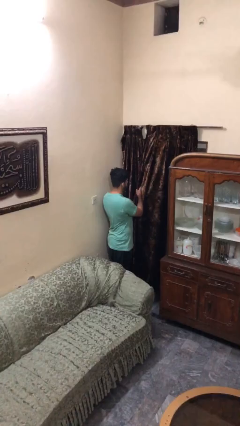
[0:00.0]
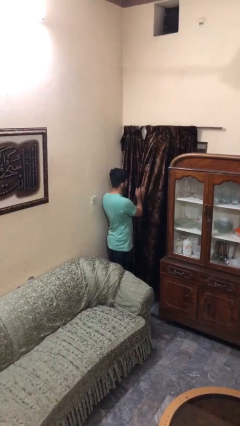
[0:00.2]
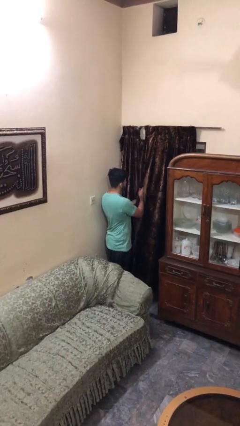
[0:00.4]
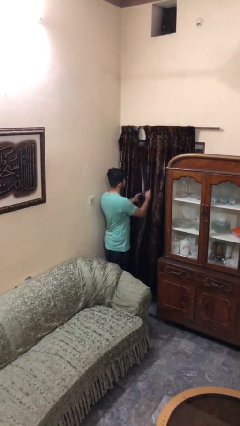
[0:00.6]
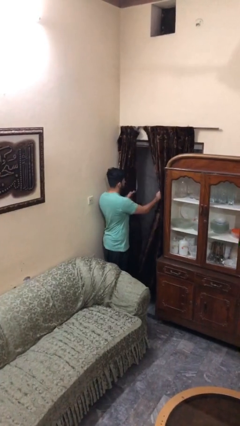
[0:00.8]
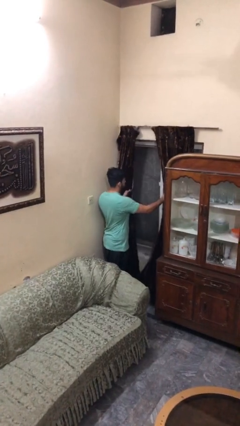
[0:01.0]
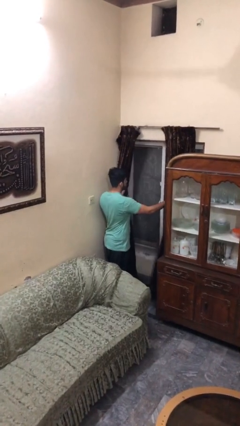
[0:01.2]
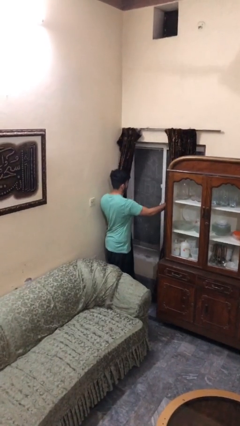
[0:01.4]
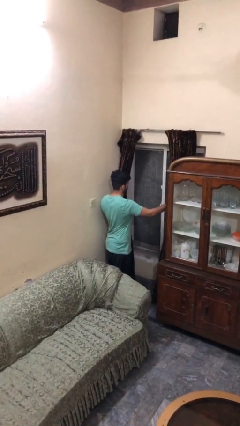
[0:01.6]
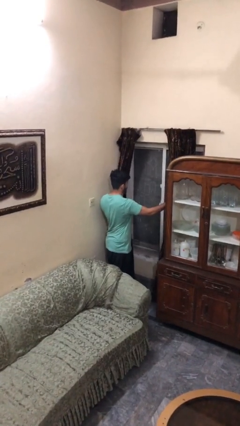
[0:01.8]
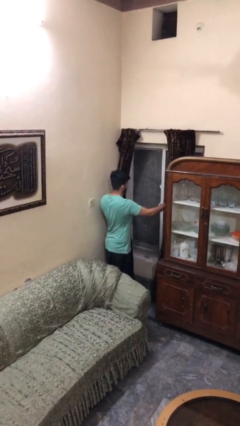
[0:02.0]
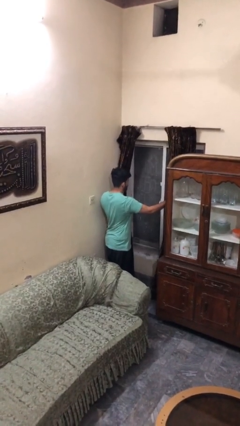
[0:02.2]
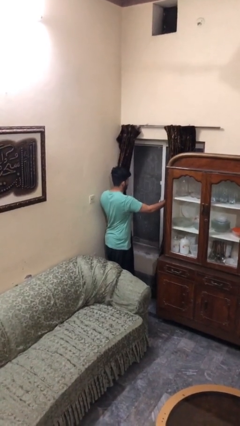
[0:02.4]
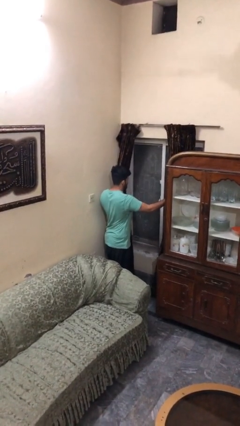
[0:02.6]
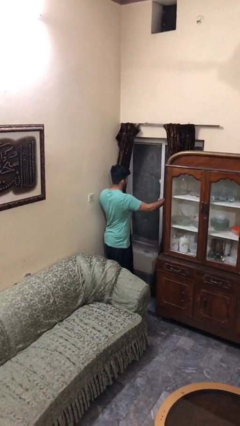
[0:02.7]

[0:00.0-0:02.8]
person opens curtains

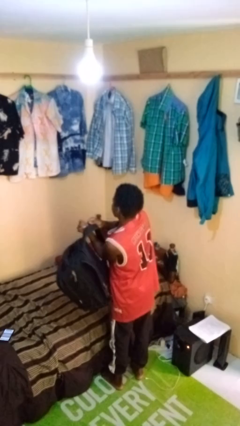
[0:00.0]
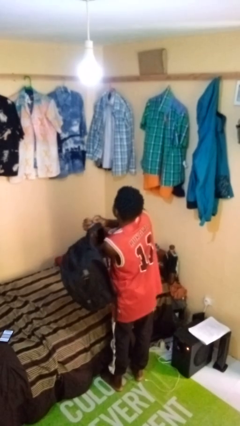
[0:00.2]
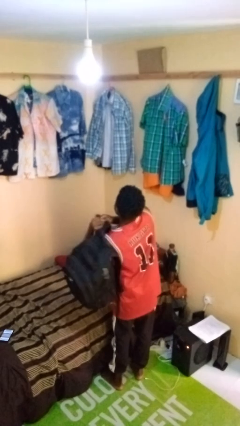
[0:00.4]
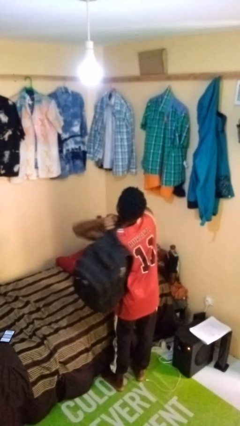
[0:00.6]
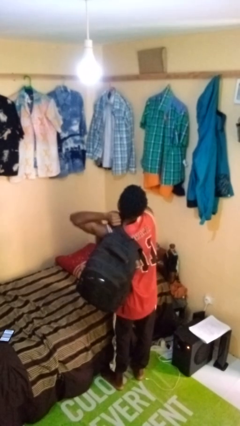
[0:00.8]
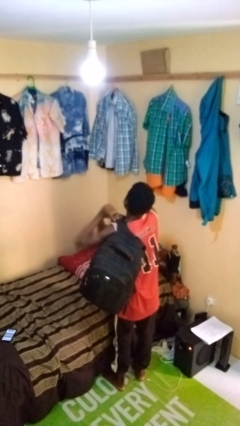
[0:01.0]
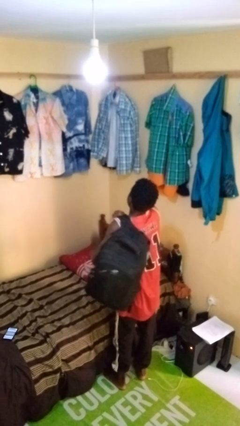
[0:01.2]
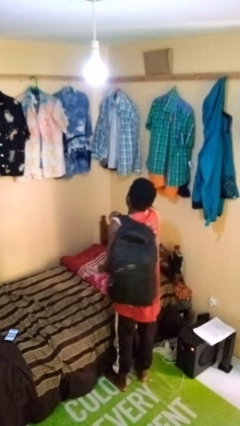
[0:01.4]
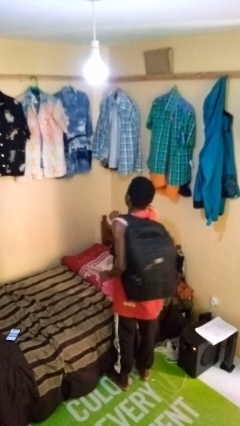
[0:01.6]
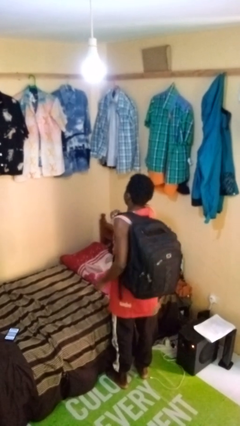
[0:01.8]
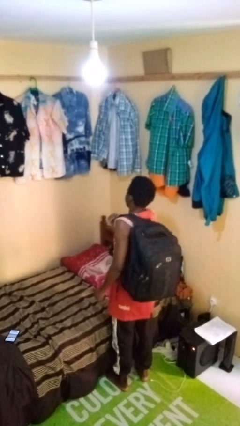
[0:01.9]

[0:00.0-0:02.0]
person puts on backpack

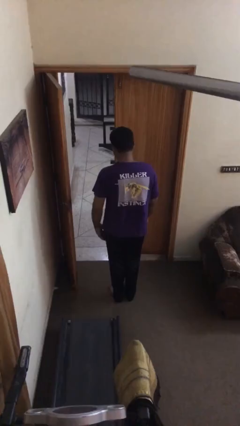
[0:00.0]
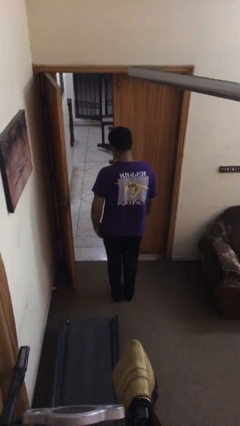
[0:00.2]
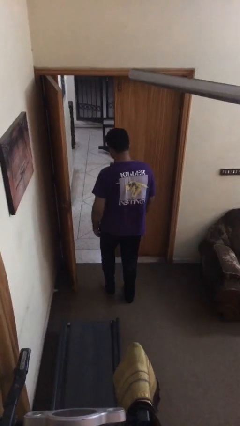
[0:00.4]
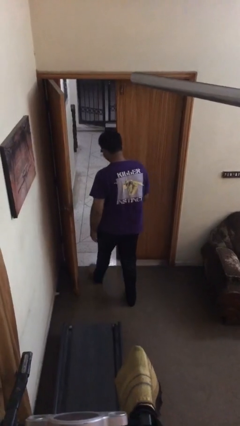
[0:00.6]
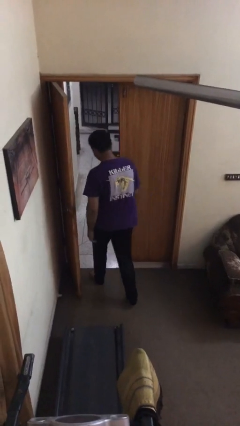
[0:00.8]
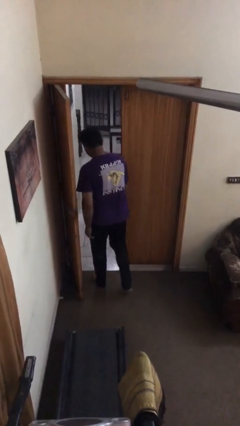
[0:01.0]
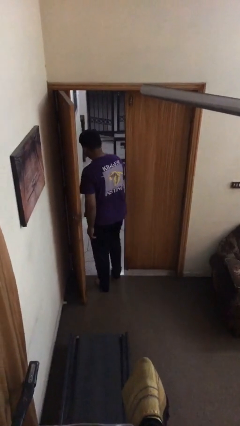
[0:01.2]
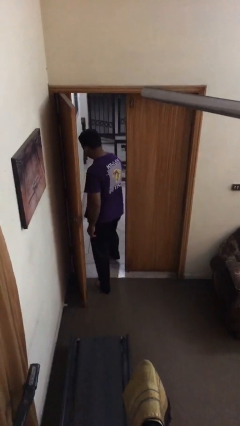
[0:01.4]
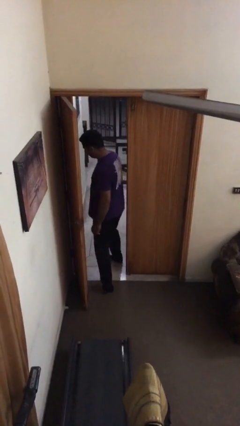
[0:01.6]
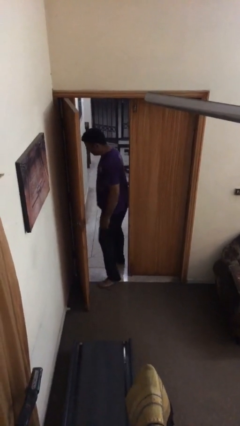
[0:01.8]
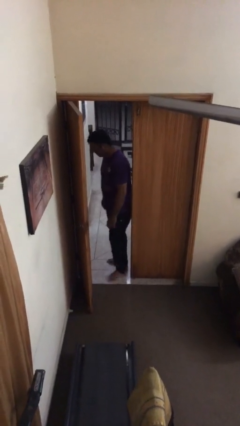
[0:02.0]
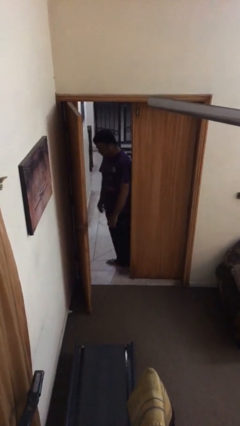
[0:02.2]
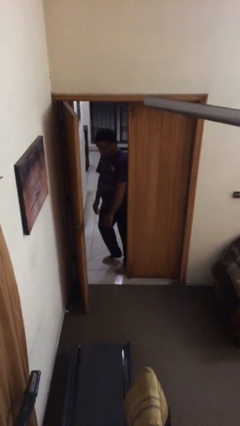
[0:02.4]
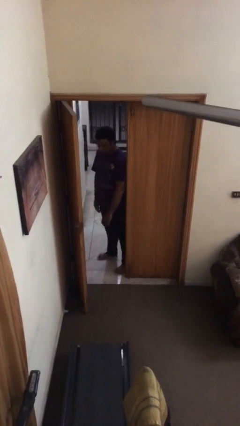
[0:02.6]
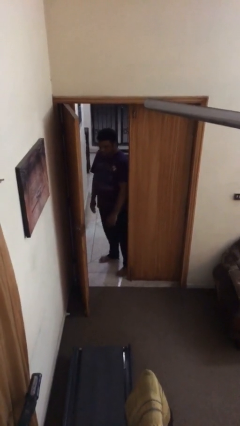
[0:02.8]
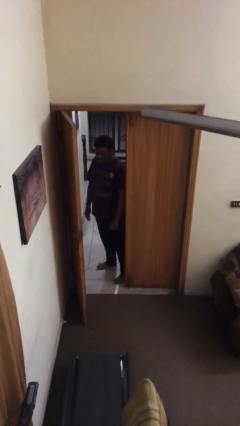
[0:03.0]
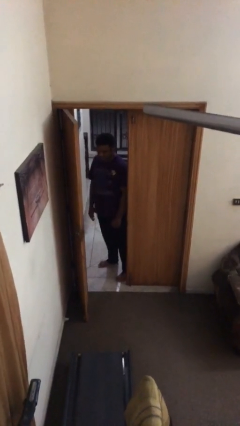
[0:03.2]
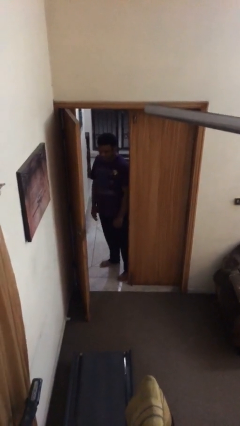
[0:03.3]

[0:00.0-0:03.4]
person exits scene through structure

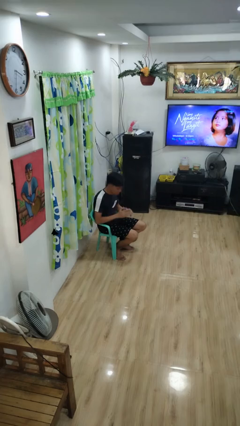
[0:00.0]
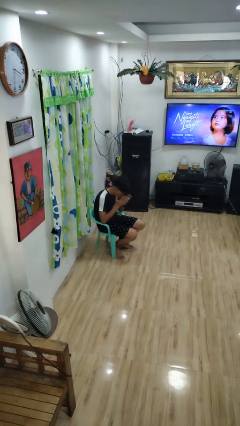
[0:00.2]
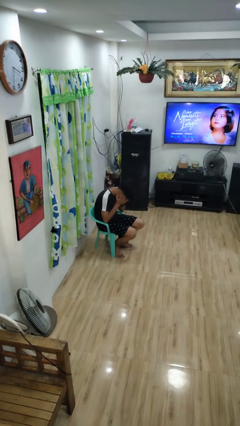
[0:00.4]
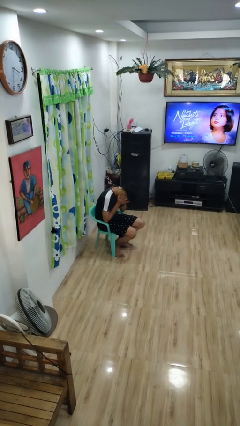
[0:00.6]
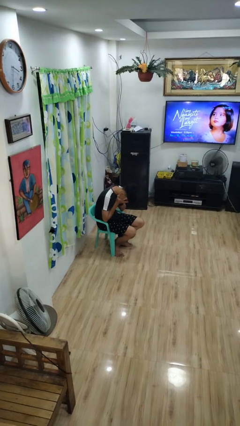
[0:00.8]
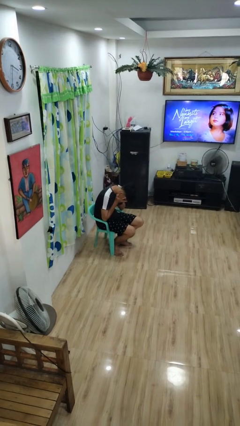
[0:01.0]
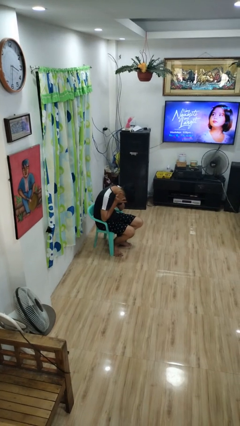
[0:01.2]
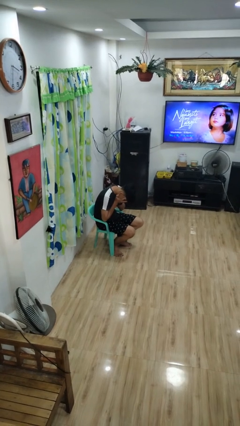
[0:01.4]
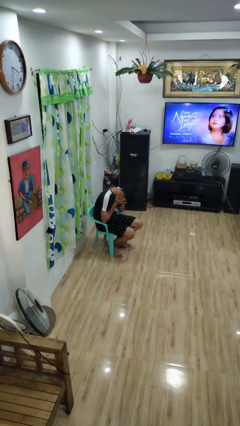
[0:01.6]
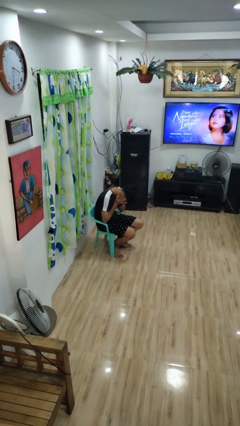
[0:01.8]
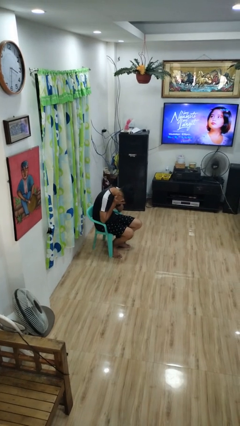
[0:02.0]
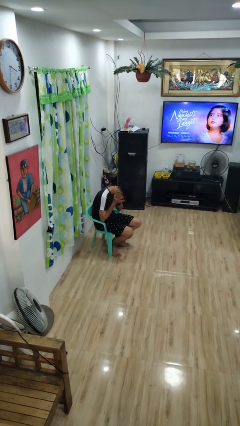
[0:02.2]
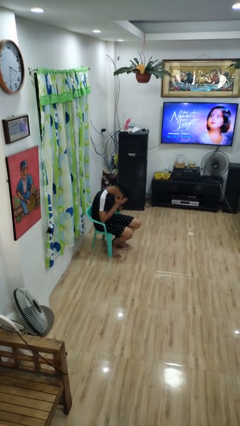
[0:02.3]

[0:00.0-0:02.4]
person covers face with hands

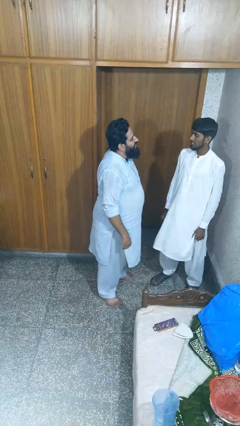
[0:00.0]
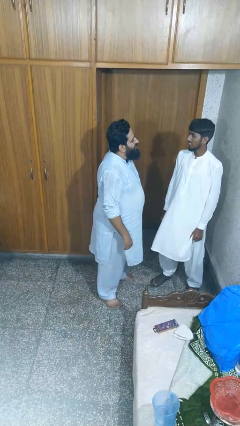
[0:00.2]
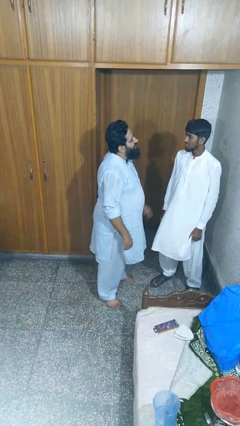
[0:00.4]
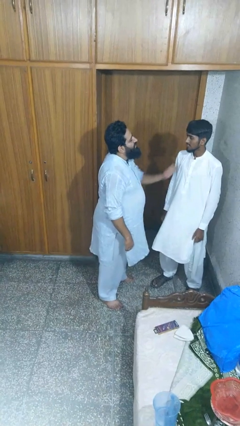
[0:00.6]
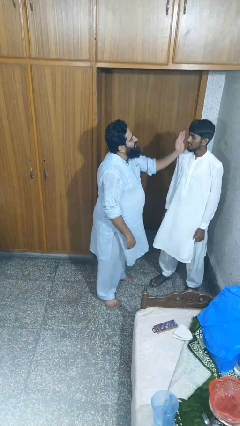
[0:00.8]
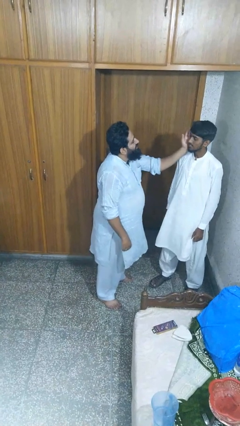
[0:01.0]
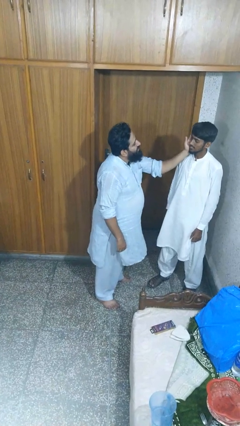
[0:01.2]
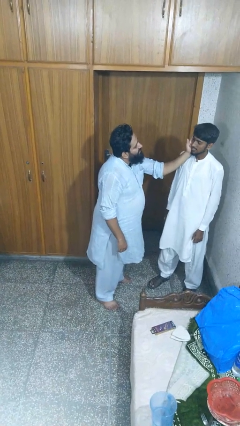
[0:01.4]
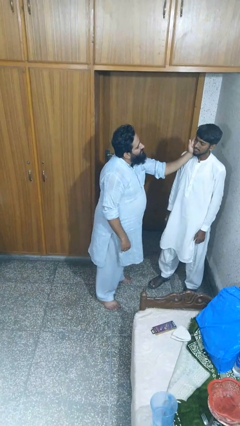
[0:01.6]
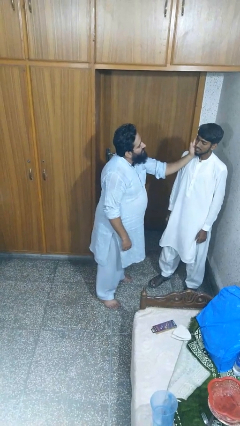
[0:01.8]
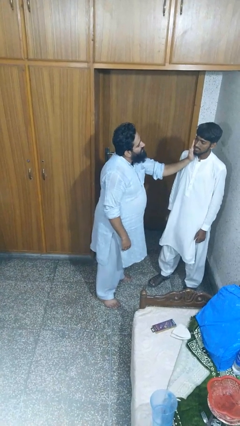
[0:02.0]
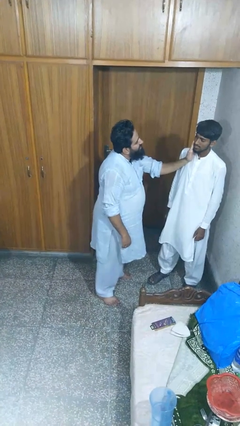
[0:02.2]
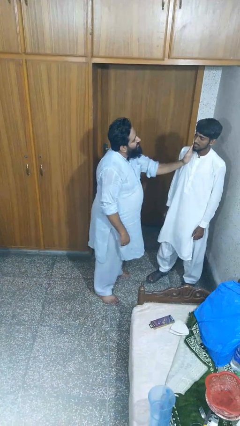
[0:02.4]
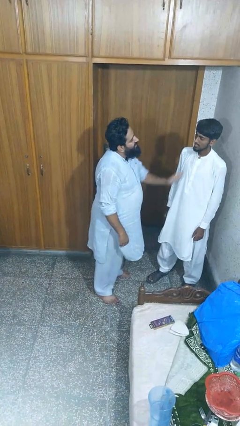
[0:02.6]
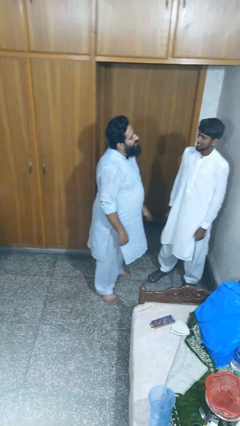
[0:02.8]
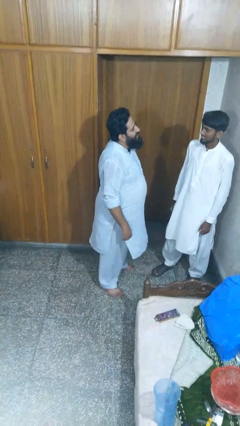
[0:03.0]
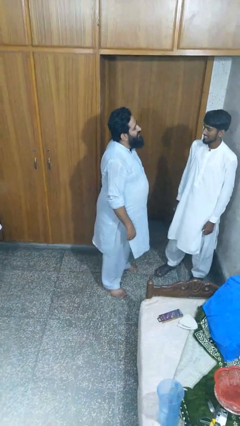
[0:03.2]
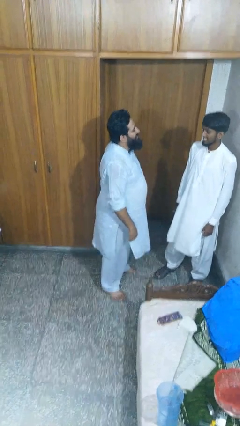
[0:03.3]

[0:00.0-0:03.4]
person touches face of person

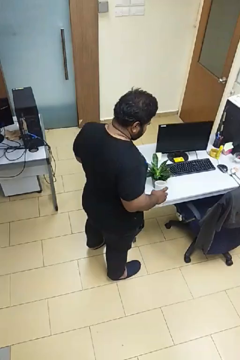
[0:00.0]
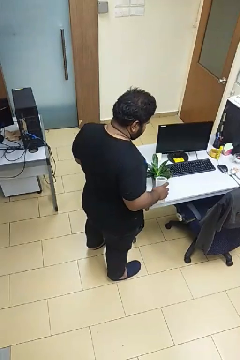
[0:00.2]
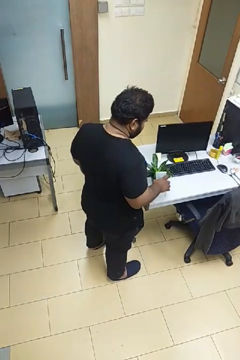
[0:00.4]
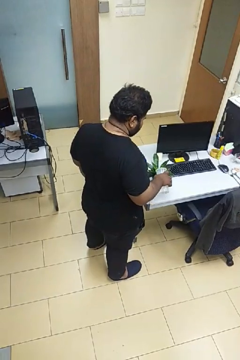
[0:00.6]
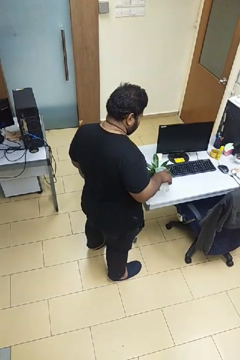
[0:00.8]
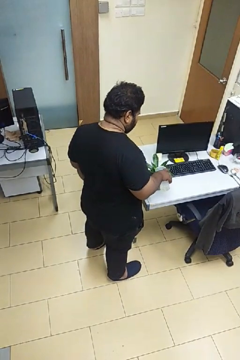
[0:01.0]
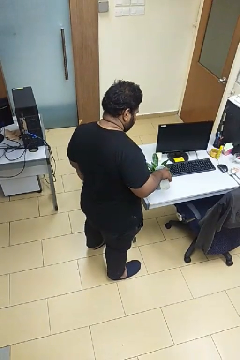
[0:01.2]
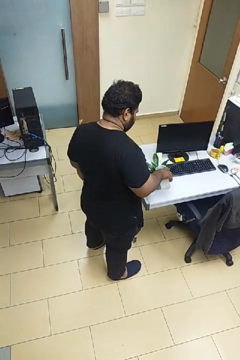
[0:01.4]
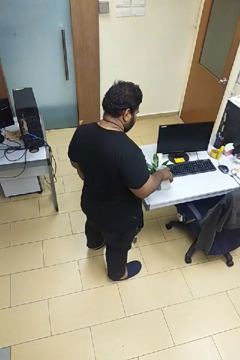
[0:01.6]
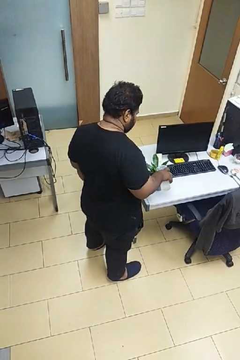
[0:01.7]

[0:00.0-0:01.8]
person waters houseplant

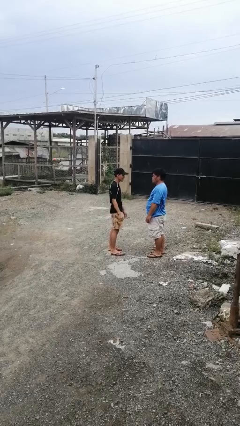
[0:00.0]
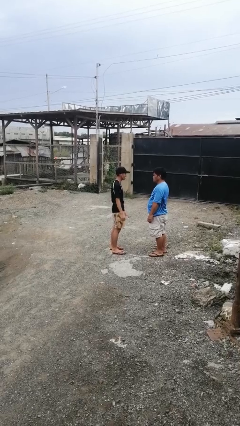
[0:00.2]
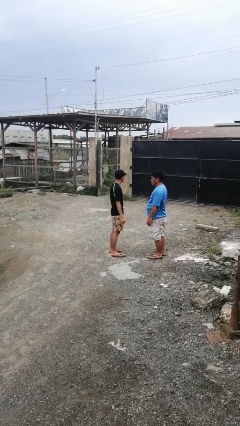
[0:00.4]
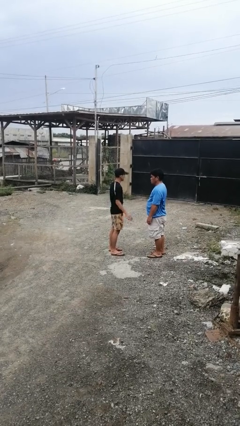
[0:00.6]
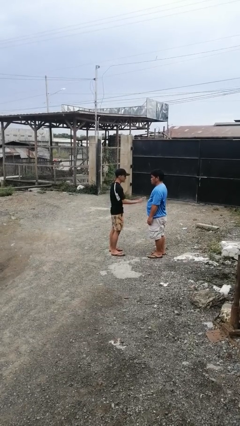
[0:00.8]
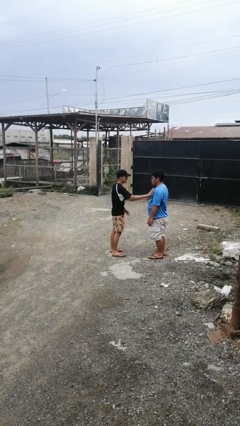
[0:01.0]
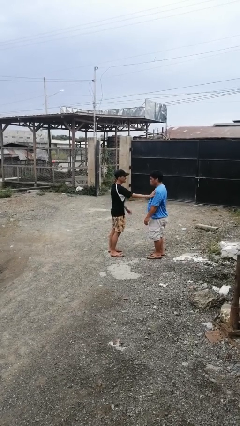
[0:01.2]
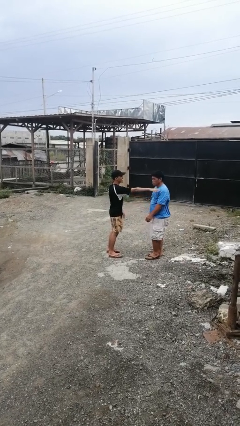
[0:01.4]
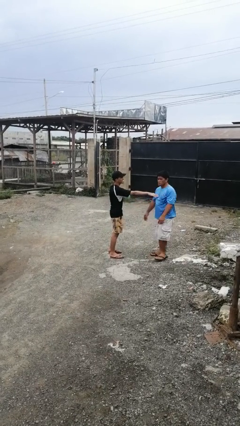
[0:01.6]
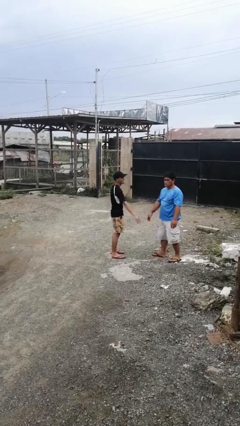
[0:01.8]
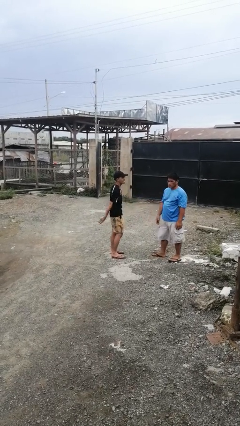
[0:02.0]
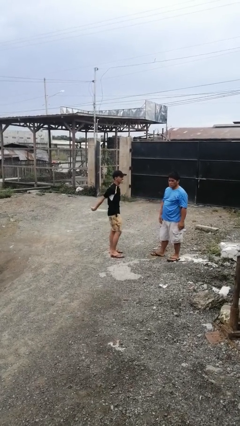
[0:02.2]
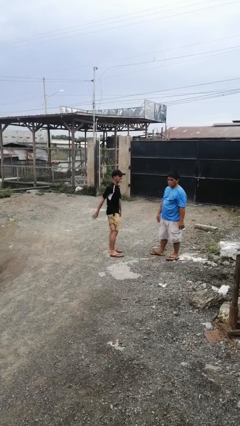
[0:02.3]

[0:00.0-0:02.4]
person shoves person
